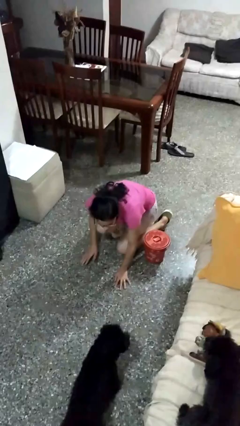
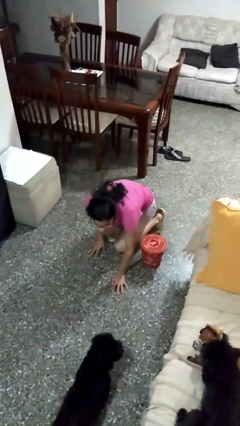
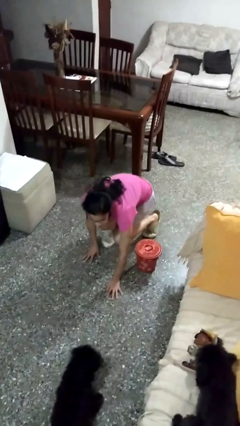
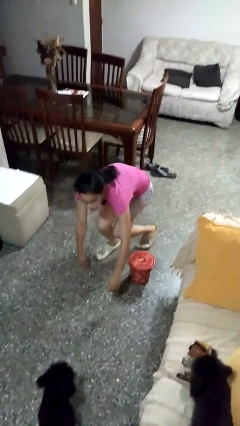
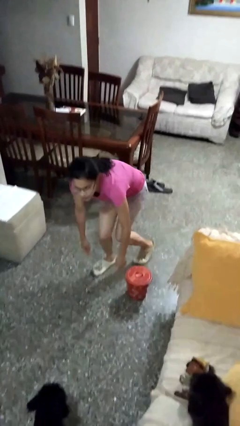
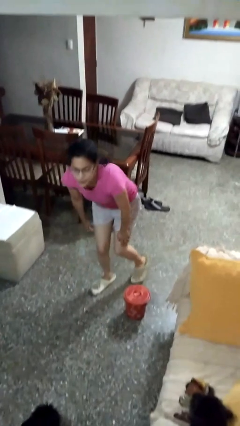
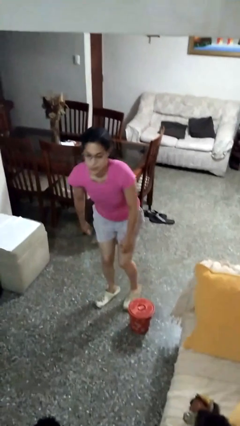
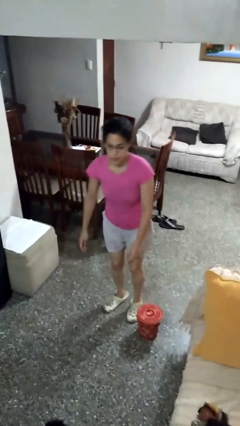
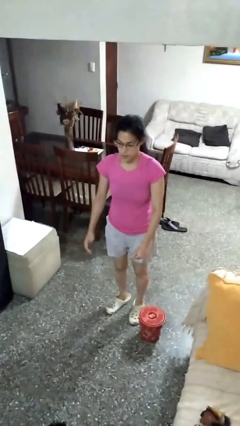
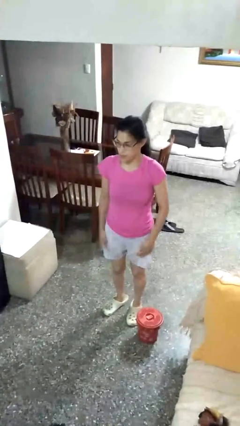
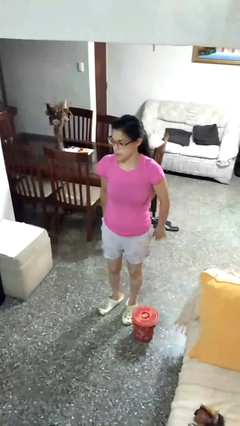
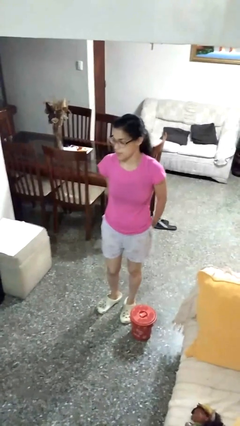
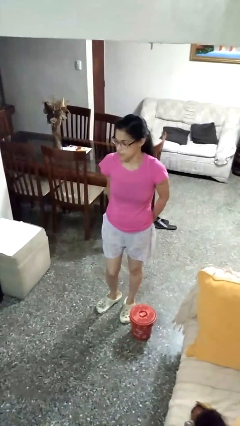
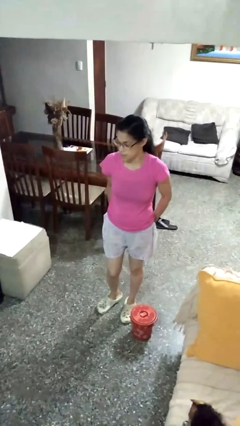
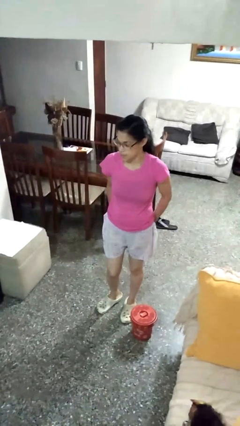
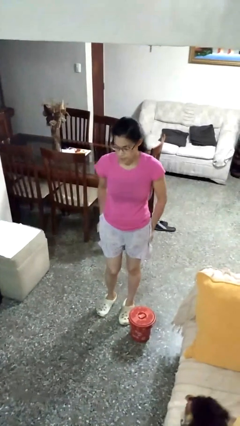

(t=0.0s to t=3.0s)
person stands up from floor

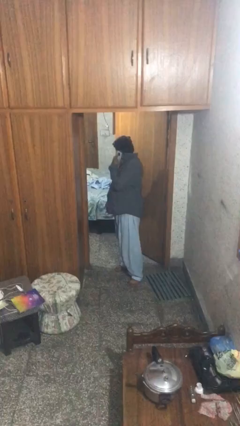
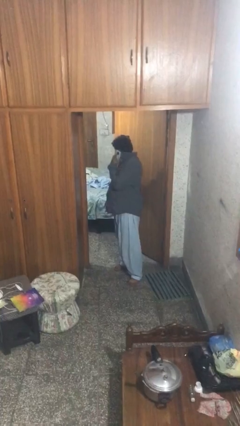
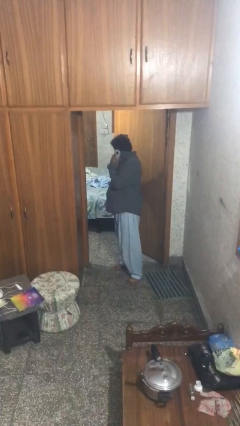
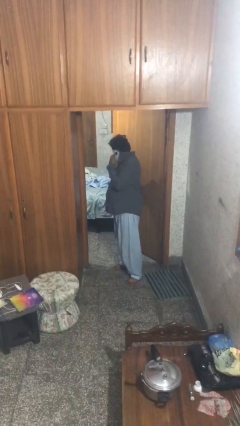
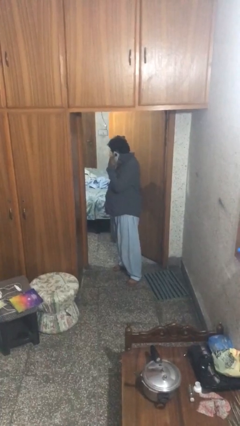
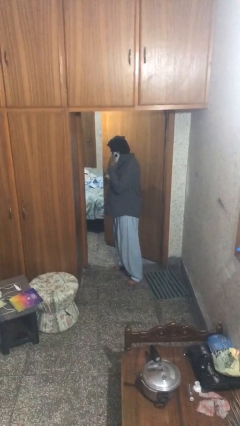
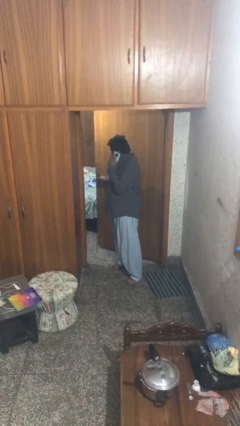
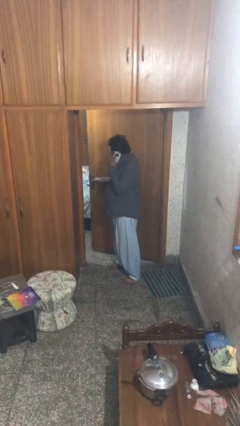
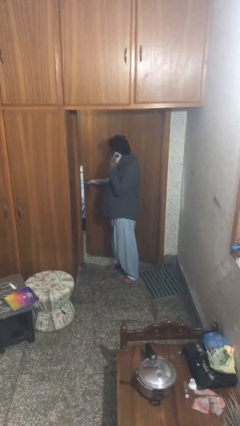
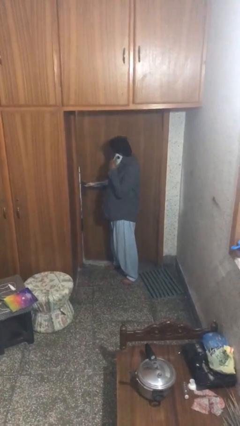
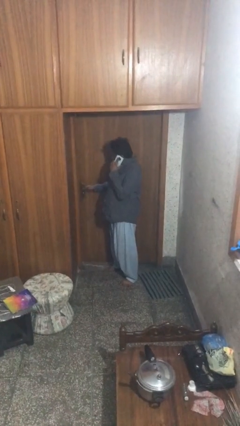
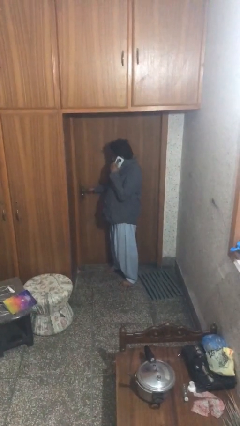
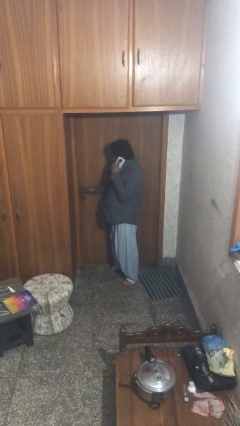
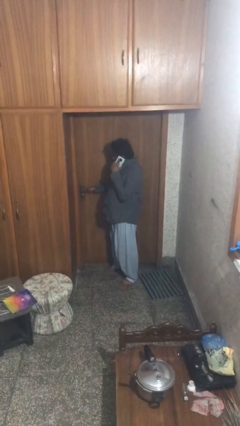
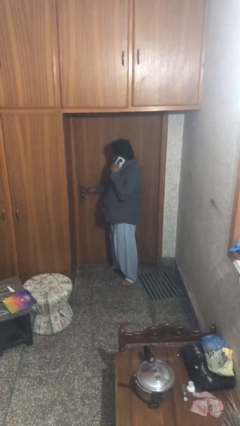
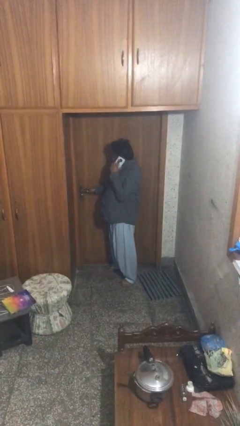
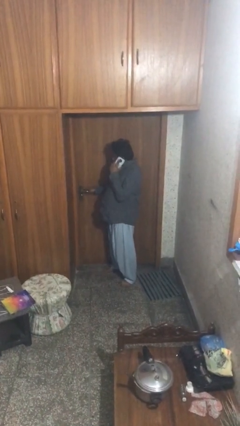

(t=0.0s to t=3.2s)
person closes facility door

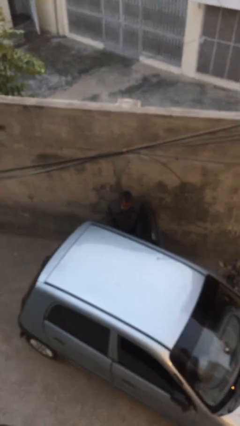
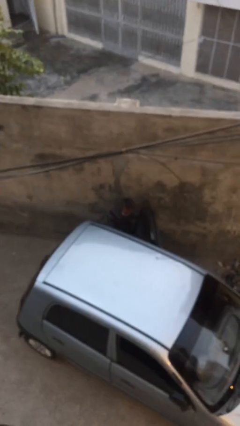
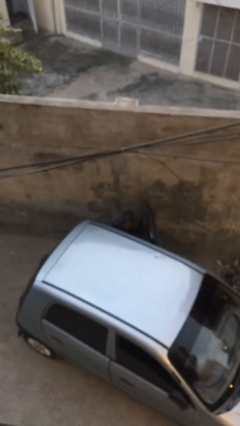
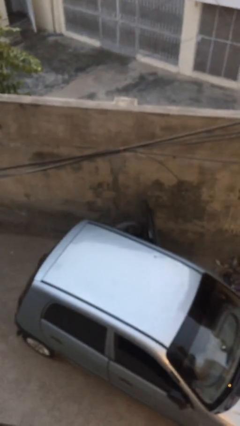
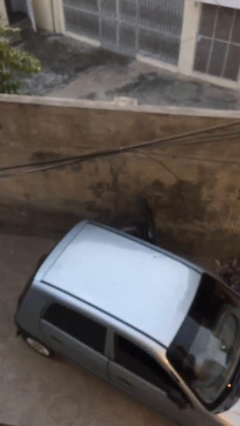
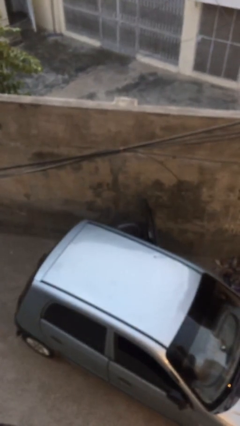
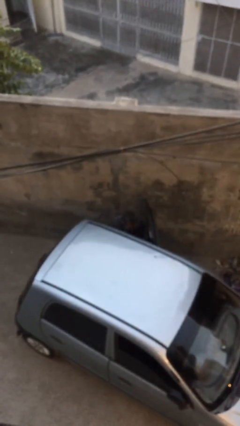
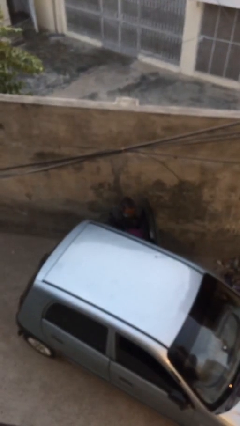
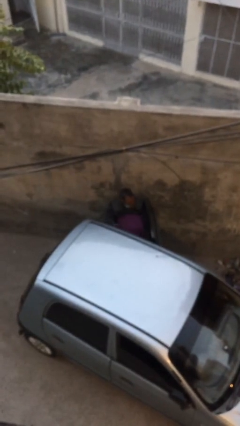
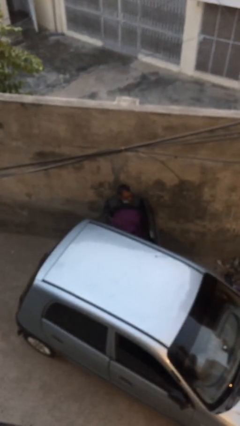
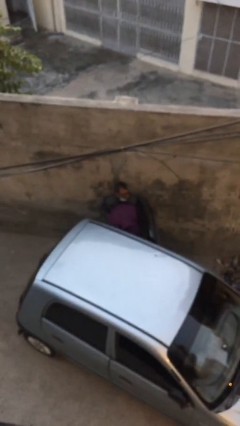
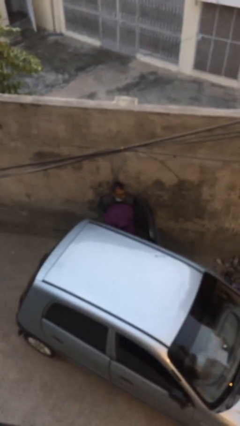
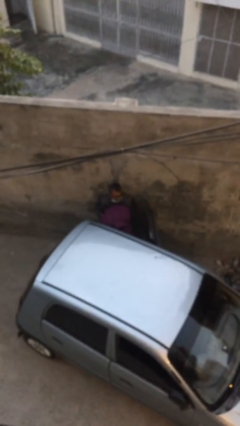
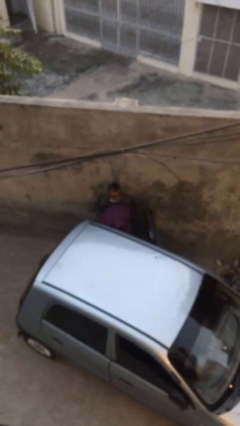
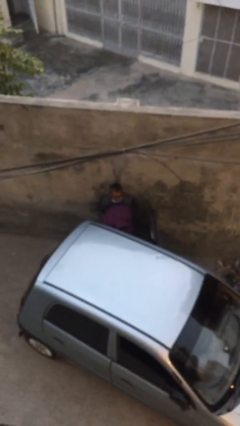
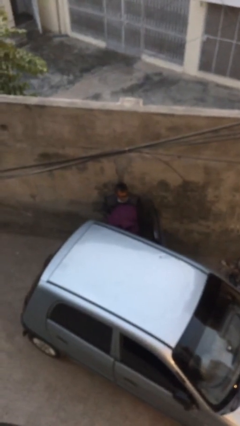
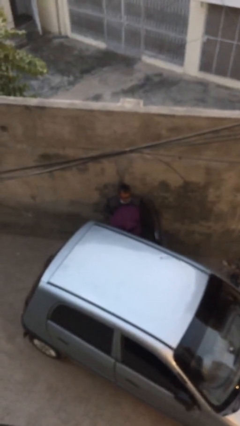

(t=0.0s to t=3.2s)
person unloads car

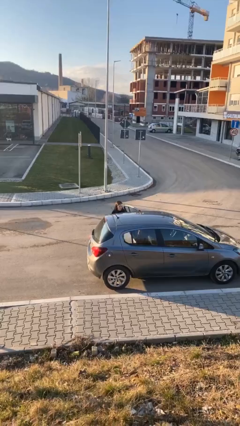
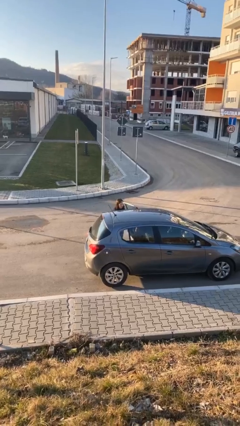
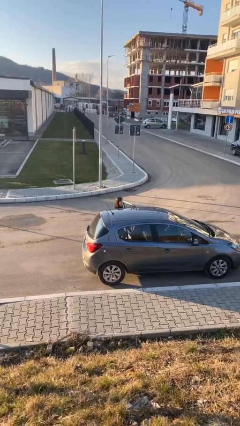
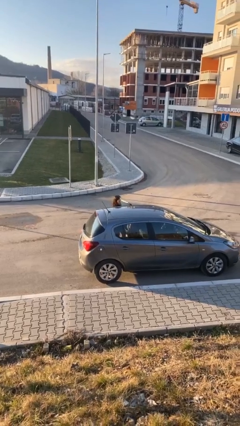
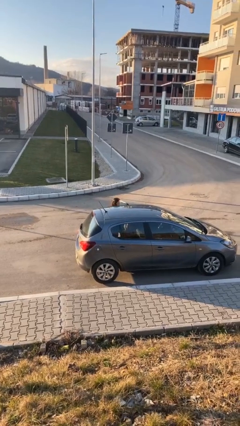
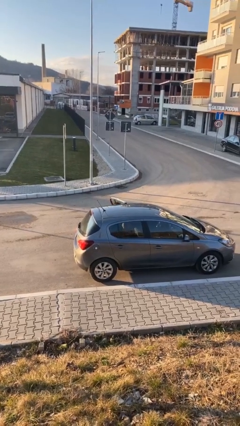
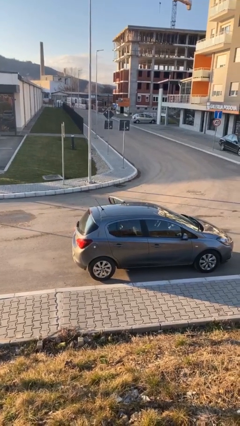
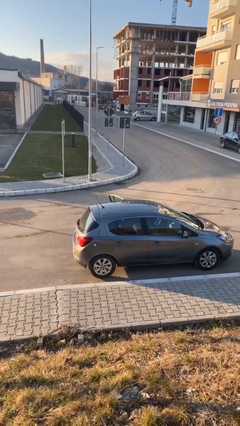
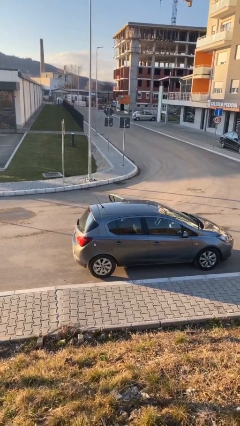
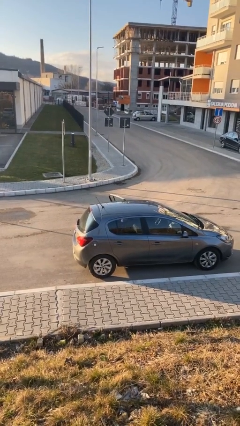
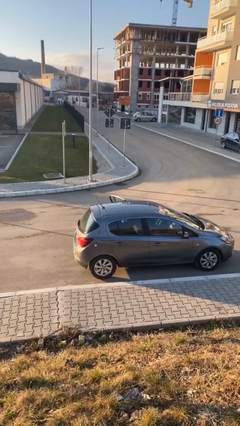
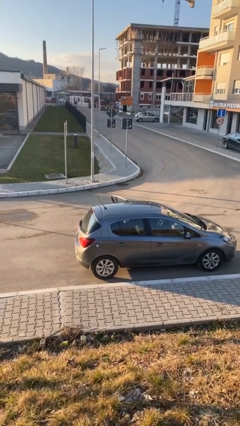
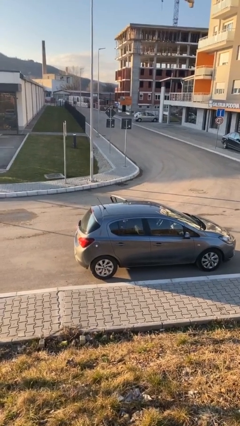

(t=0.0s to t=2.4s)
person enters car

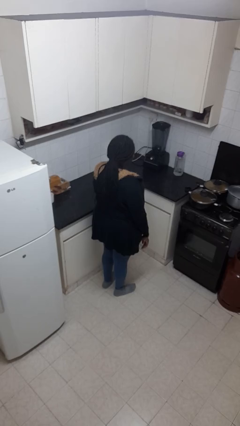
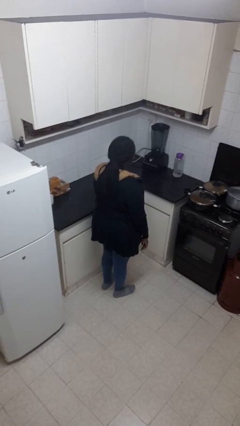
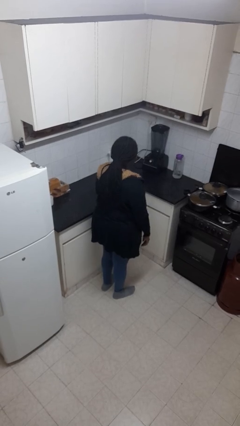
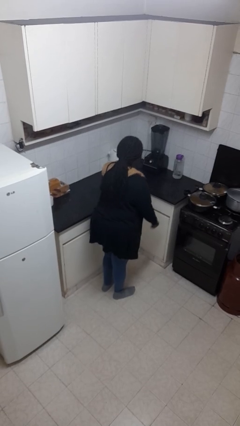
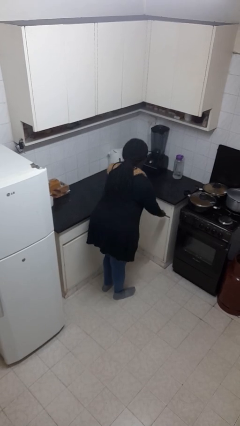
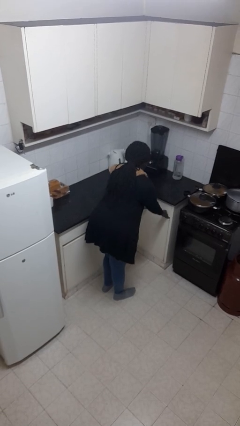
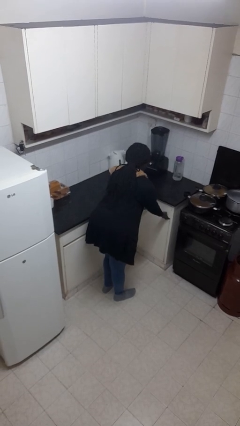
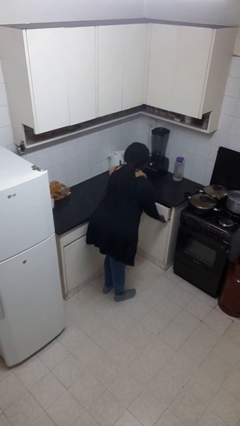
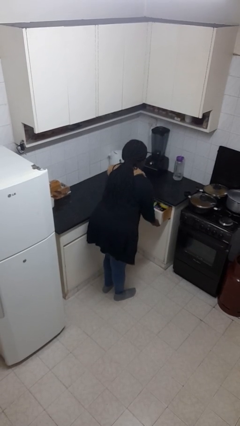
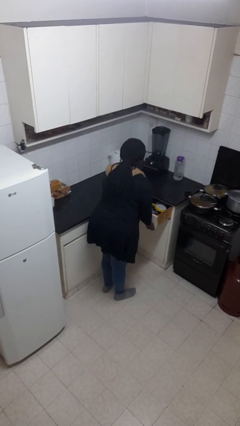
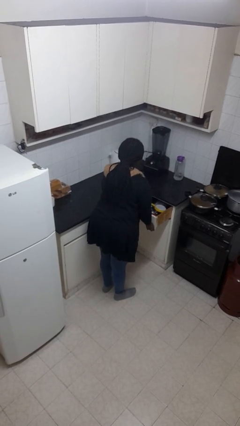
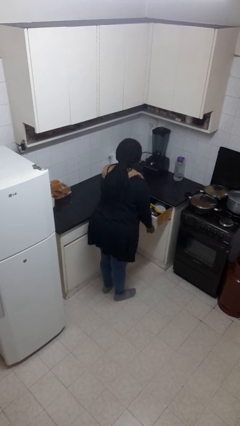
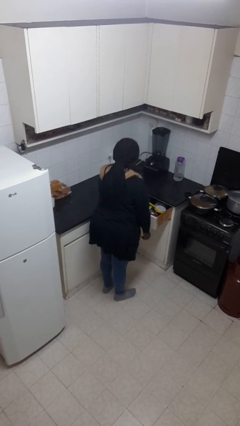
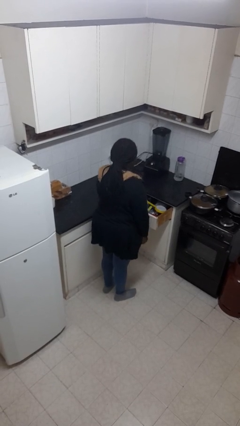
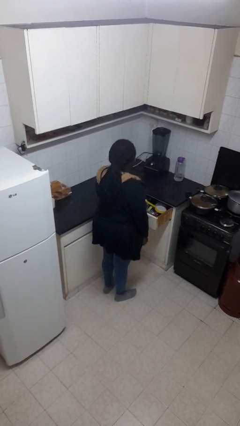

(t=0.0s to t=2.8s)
person opens kitchen drawer

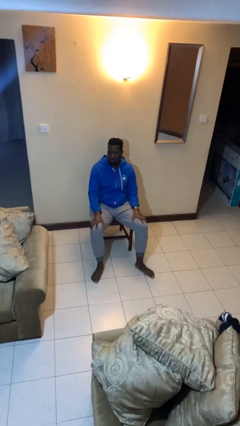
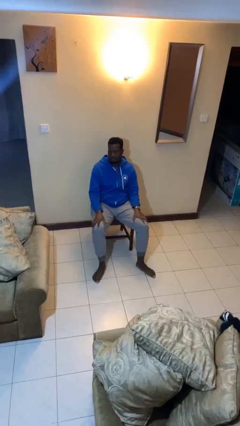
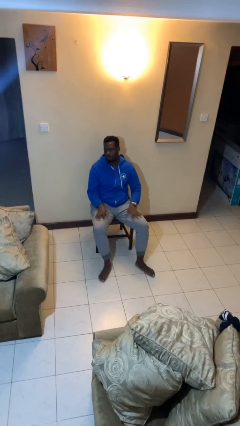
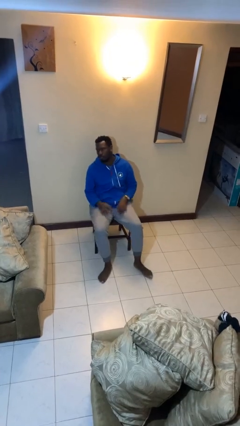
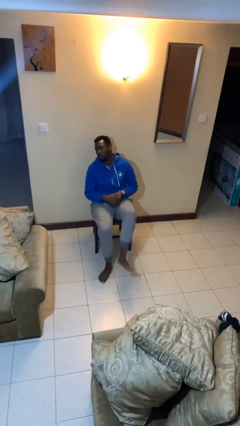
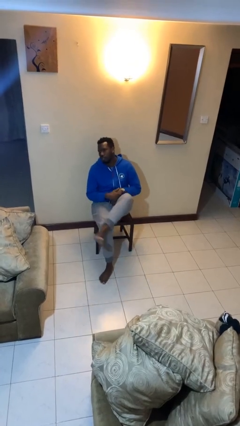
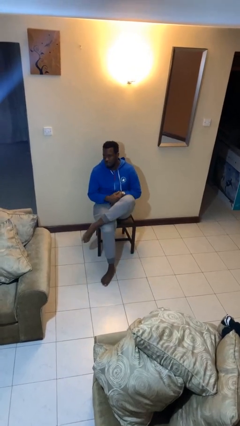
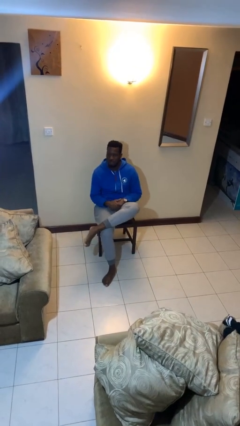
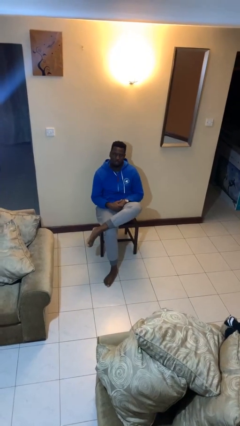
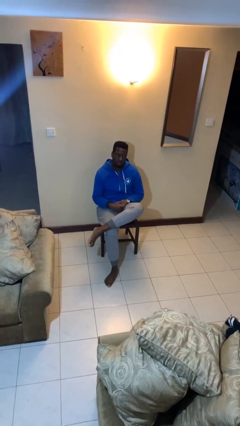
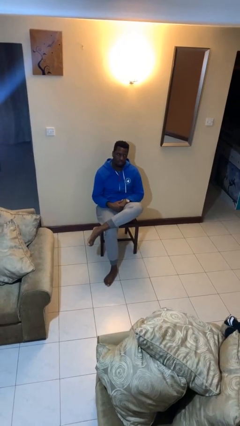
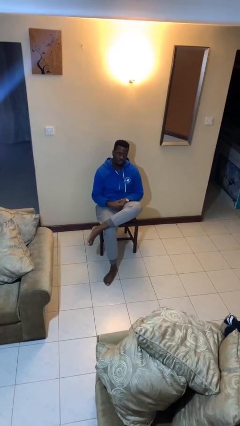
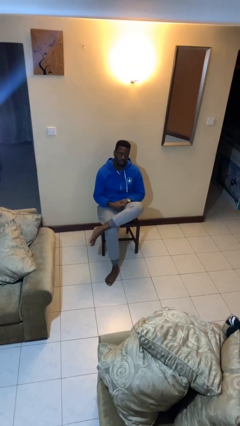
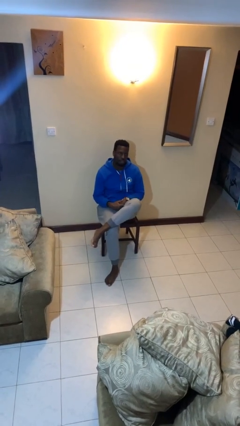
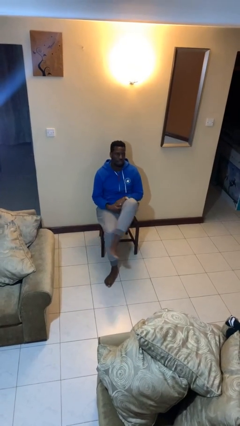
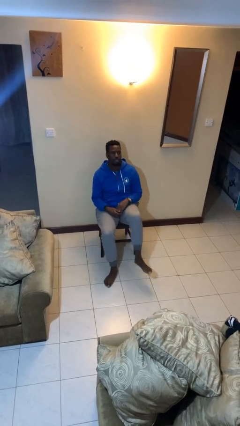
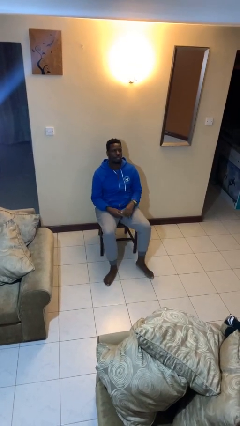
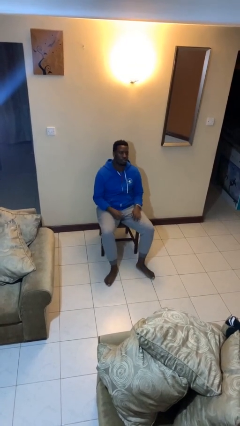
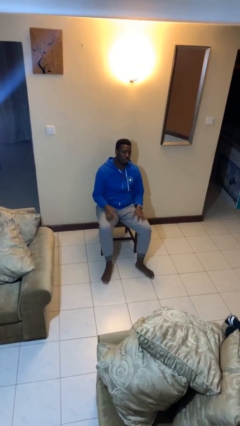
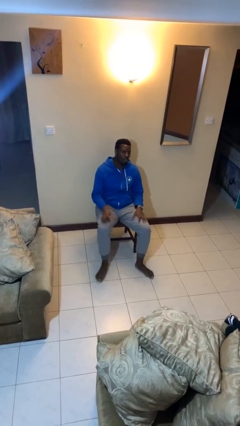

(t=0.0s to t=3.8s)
person crosses legs
